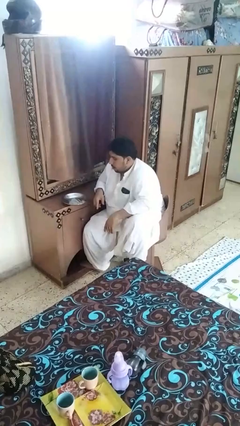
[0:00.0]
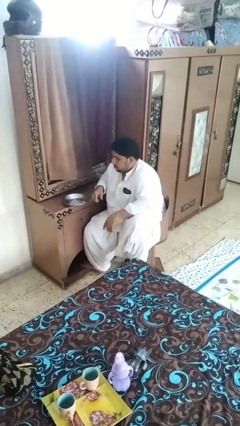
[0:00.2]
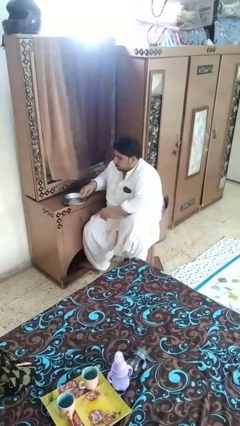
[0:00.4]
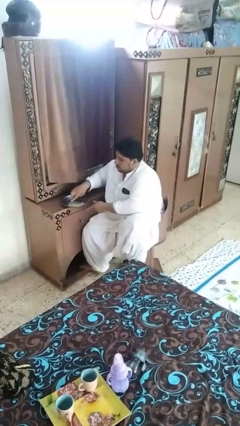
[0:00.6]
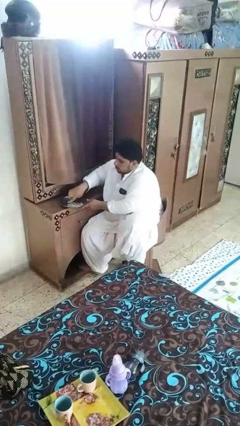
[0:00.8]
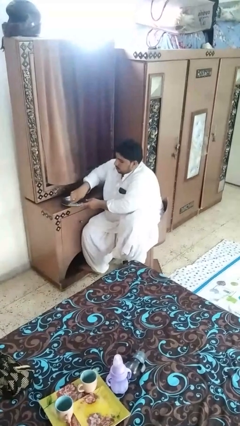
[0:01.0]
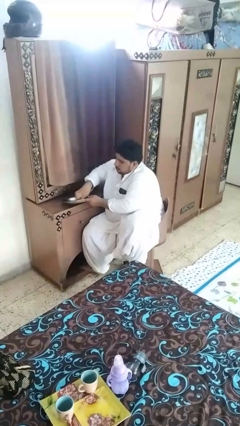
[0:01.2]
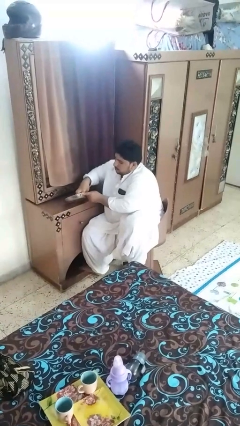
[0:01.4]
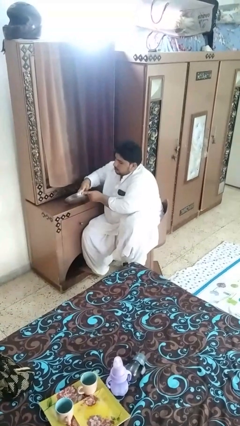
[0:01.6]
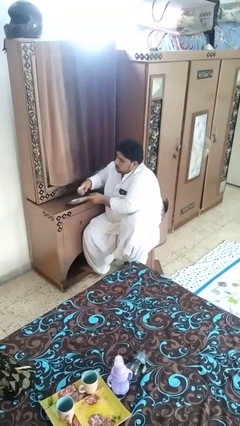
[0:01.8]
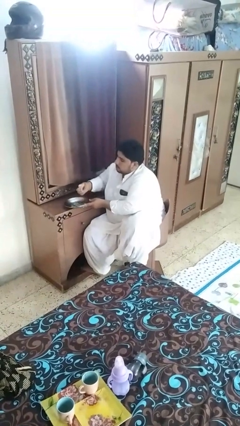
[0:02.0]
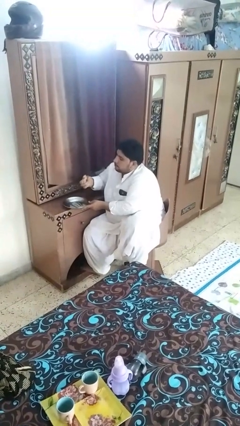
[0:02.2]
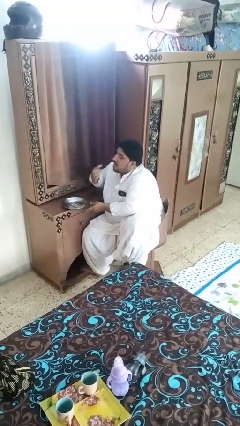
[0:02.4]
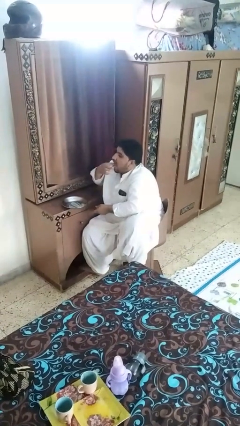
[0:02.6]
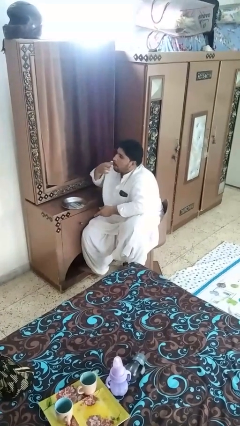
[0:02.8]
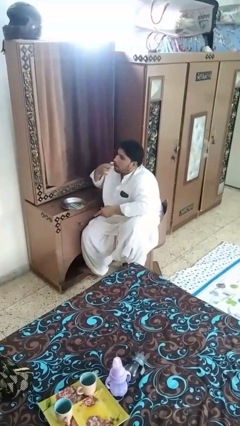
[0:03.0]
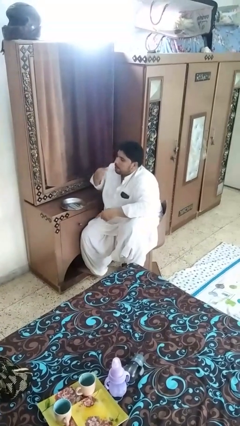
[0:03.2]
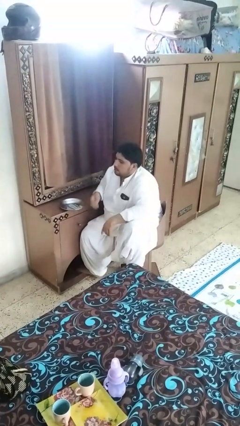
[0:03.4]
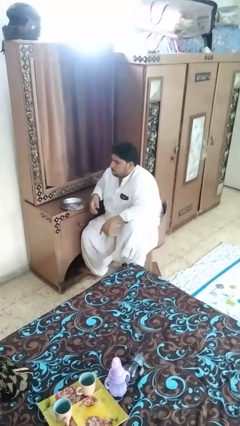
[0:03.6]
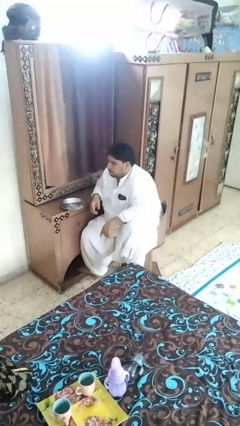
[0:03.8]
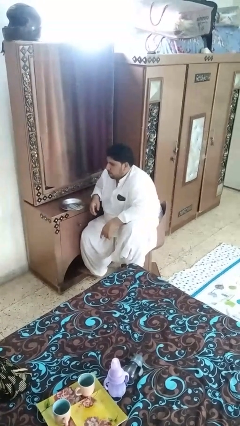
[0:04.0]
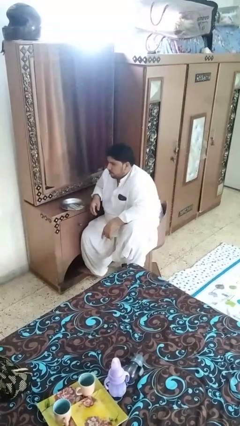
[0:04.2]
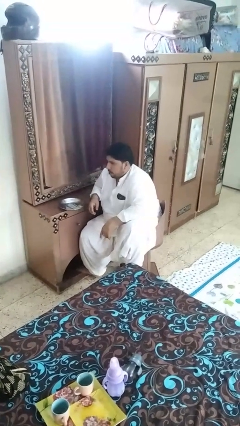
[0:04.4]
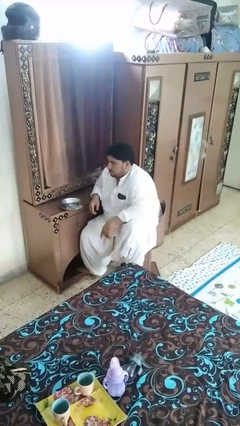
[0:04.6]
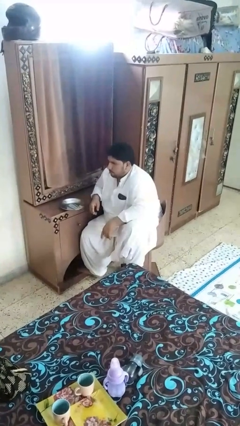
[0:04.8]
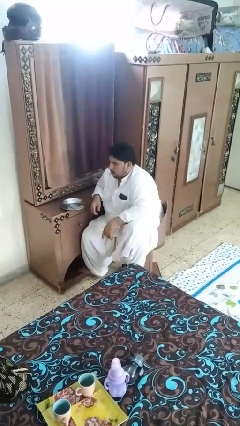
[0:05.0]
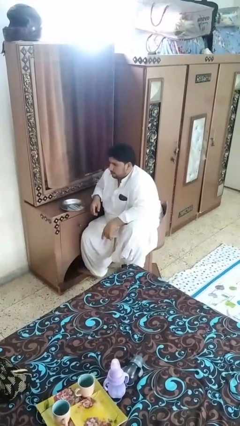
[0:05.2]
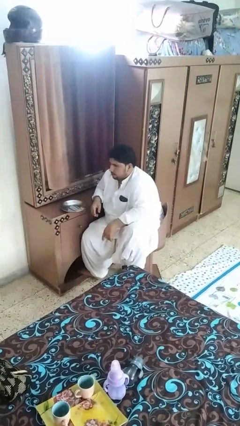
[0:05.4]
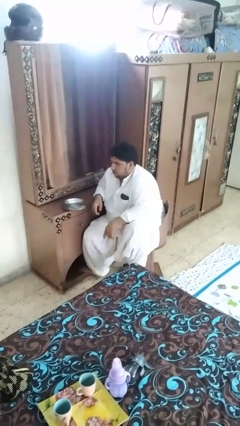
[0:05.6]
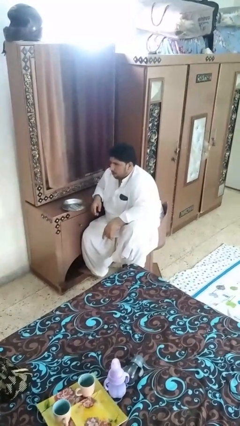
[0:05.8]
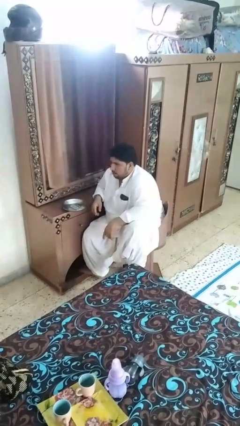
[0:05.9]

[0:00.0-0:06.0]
person eats with hands

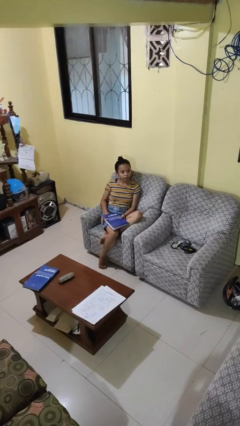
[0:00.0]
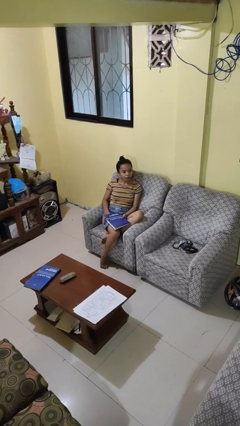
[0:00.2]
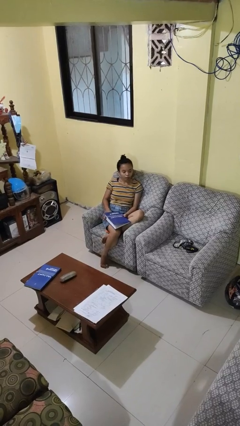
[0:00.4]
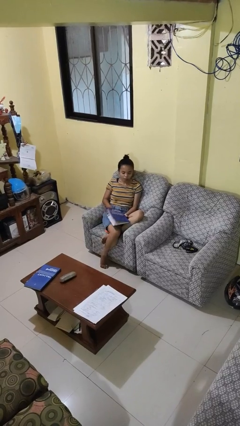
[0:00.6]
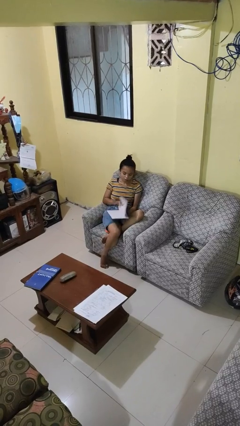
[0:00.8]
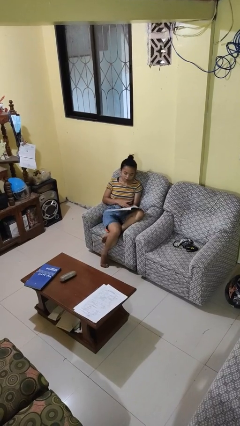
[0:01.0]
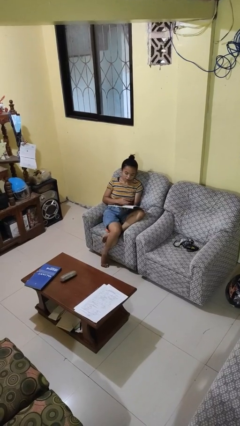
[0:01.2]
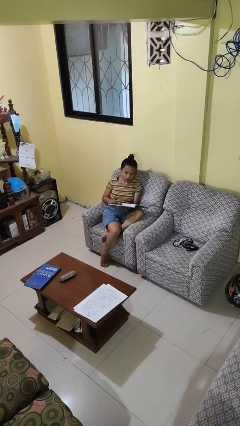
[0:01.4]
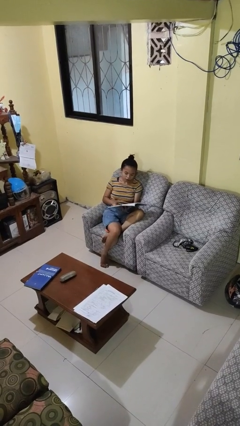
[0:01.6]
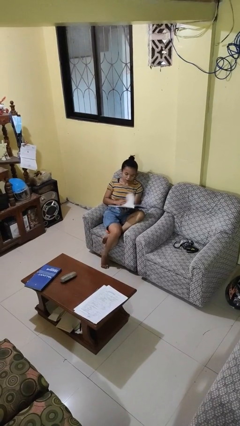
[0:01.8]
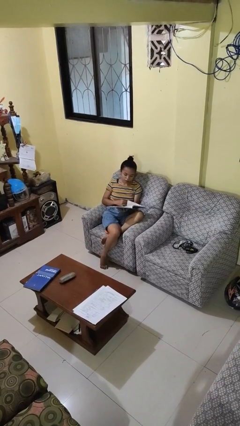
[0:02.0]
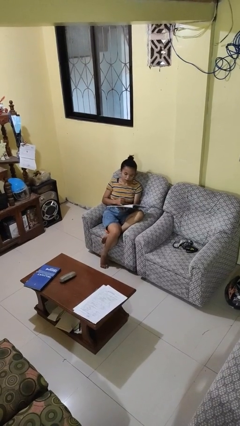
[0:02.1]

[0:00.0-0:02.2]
person reads book

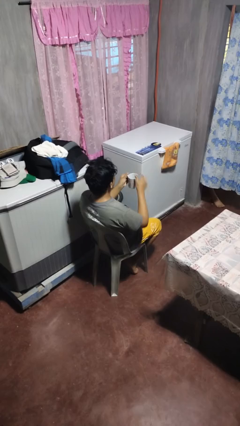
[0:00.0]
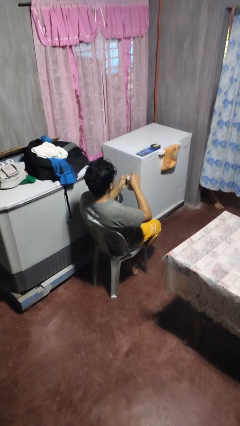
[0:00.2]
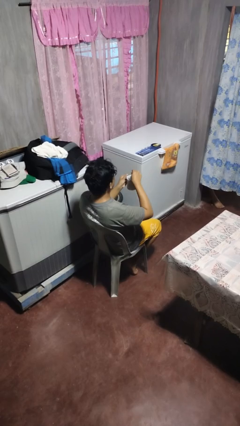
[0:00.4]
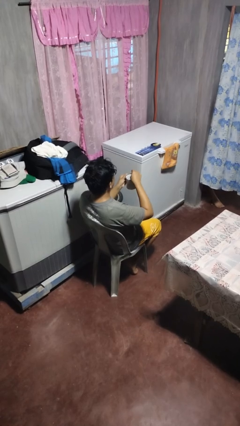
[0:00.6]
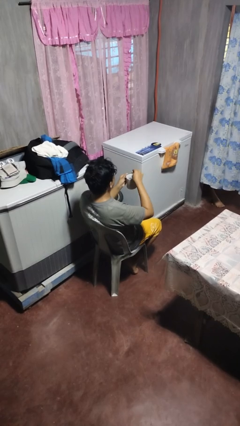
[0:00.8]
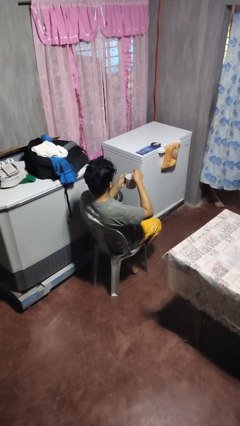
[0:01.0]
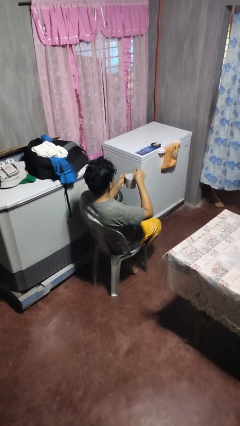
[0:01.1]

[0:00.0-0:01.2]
person stirs mug

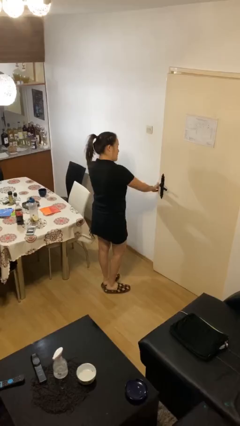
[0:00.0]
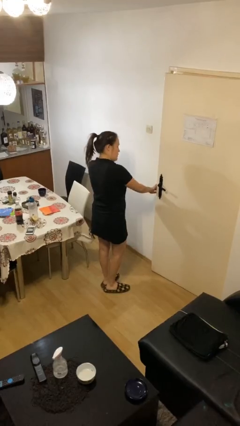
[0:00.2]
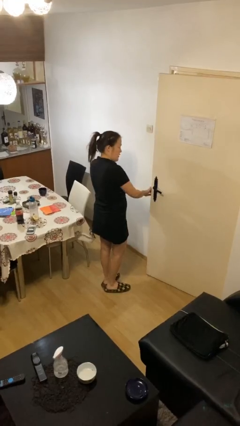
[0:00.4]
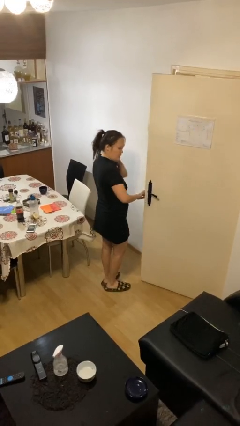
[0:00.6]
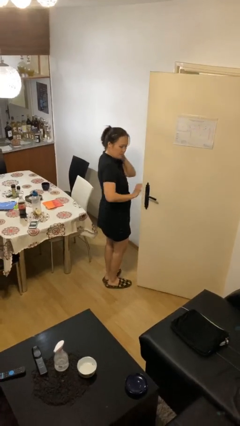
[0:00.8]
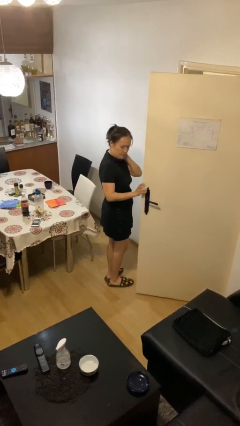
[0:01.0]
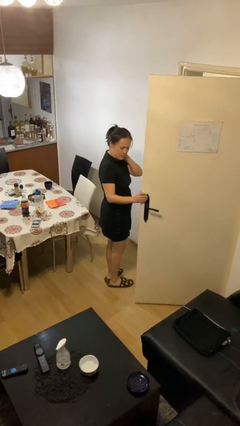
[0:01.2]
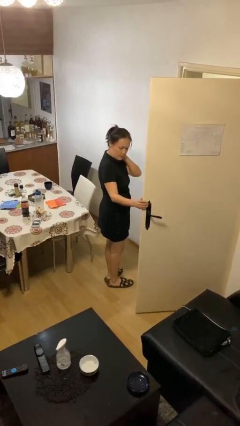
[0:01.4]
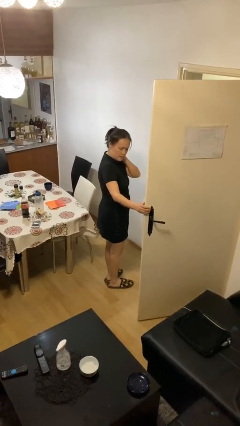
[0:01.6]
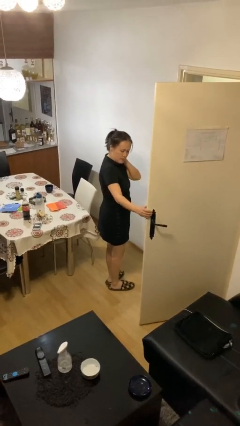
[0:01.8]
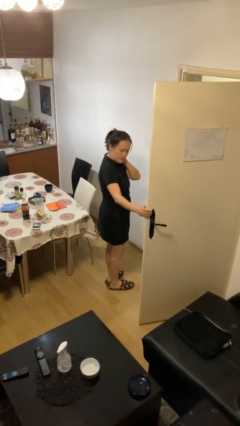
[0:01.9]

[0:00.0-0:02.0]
person opens facility door

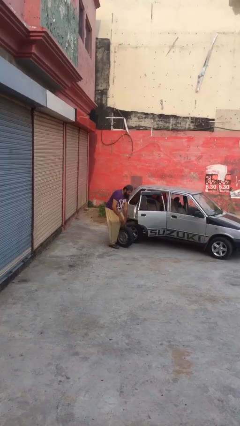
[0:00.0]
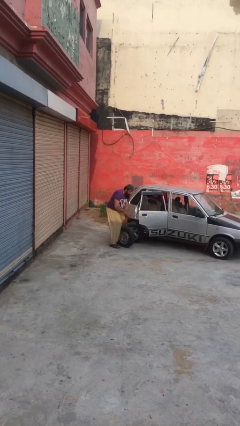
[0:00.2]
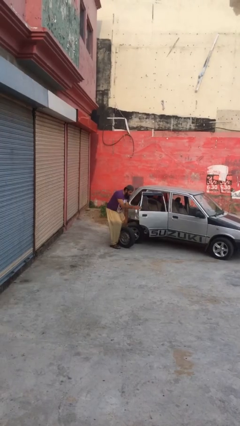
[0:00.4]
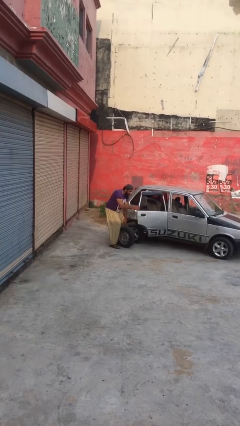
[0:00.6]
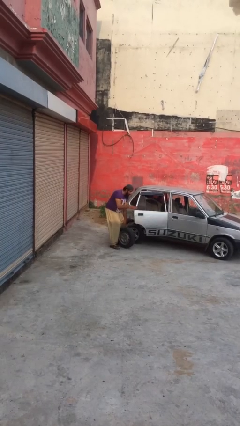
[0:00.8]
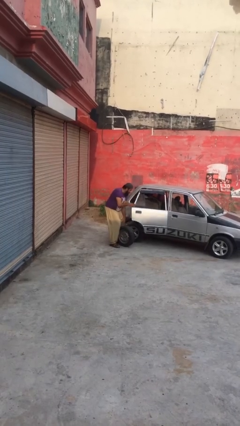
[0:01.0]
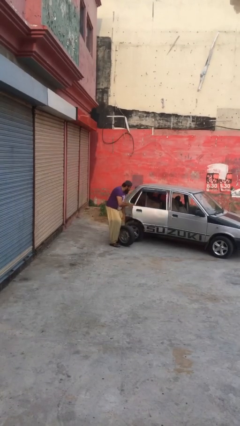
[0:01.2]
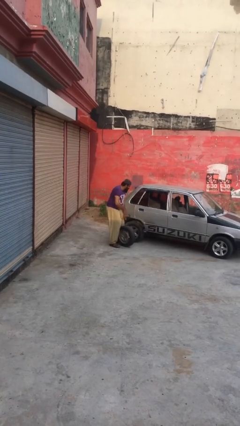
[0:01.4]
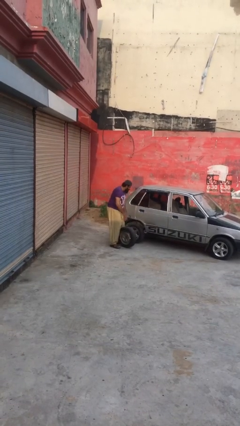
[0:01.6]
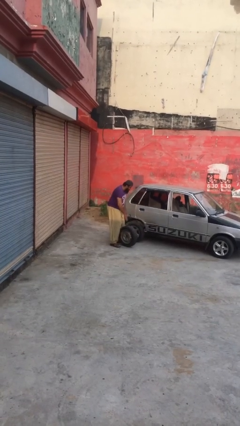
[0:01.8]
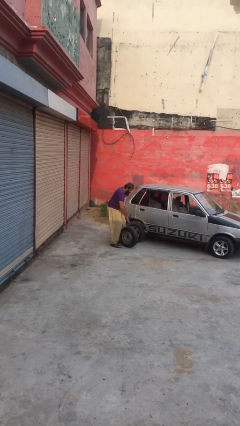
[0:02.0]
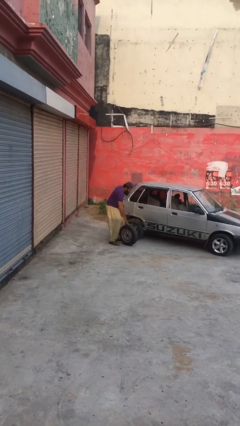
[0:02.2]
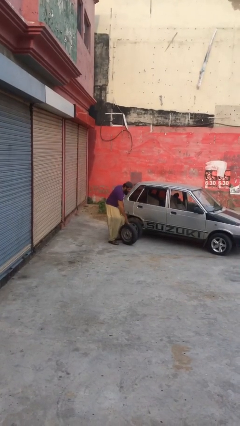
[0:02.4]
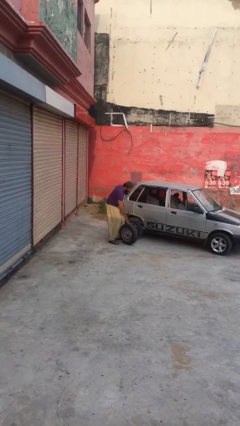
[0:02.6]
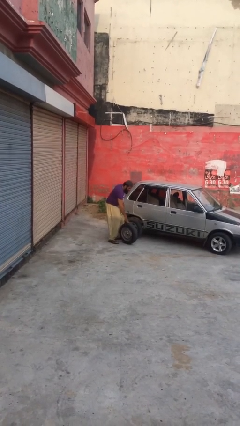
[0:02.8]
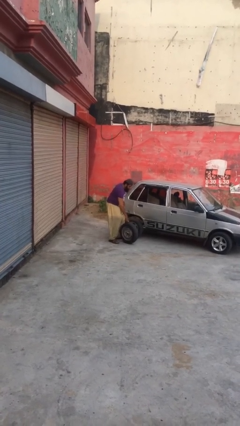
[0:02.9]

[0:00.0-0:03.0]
person closes car door

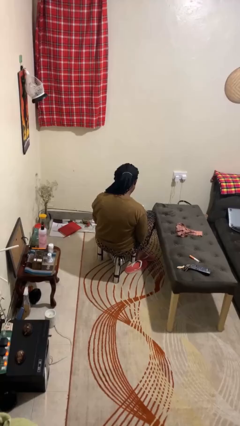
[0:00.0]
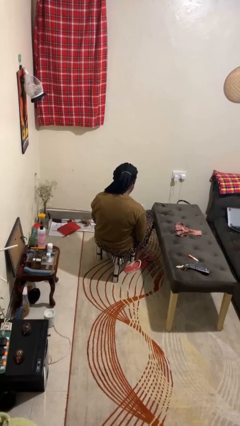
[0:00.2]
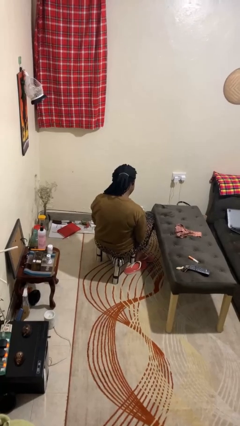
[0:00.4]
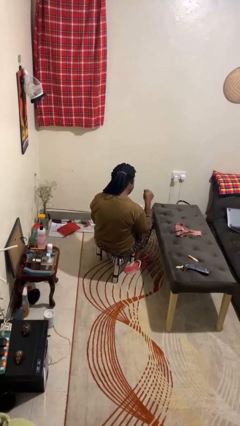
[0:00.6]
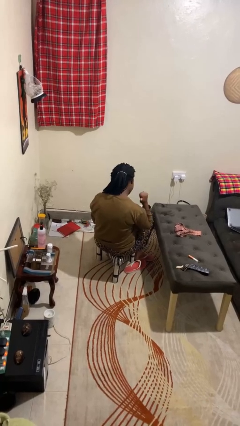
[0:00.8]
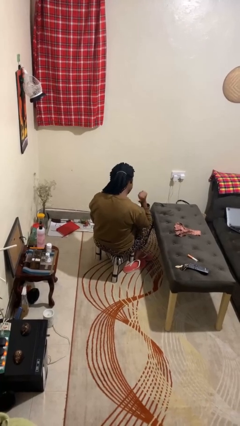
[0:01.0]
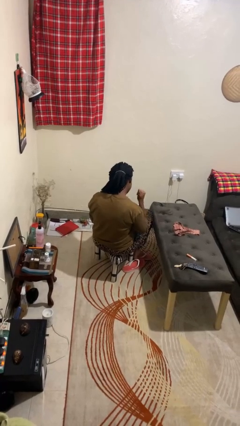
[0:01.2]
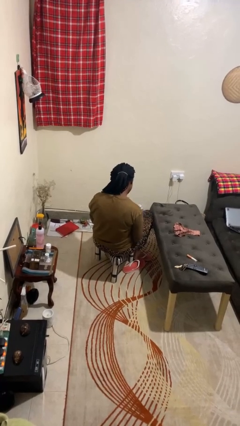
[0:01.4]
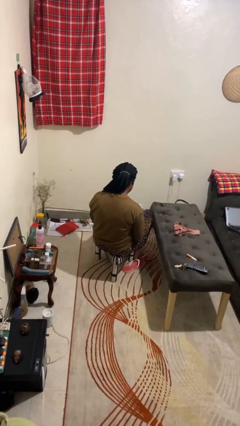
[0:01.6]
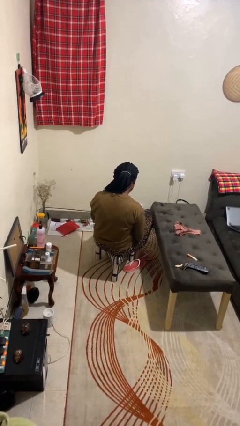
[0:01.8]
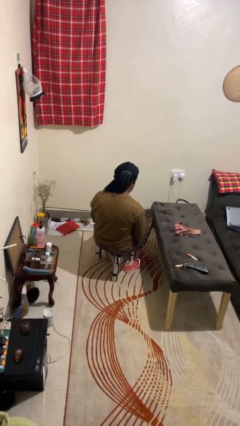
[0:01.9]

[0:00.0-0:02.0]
person gestures behind me

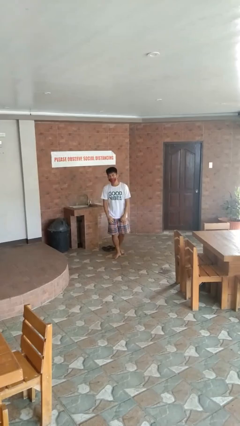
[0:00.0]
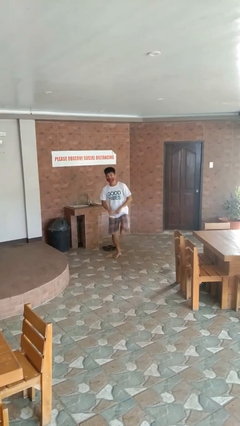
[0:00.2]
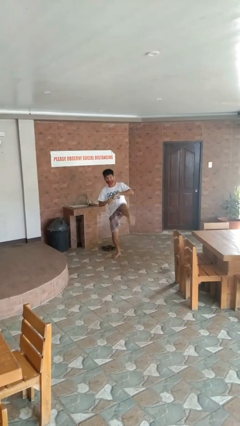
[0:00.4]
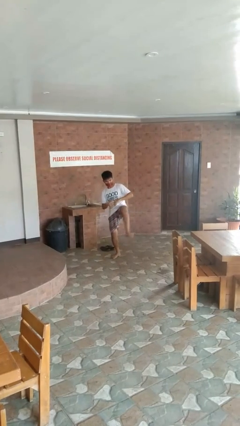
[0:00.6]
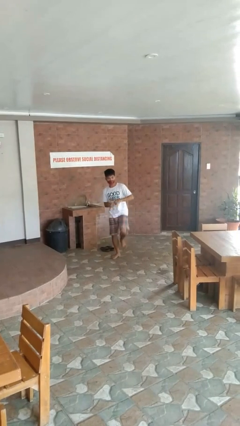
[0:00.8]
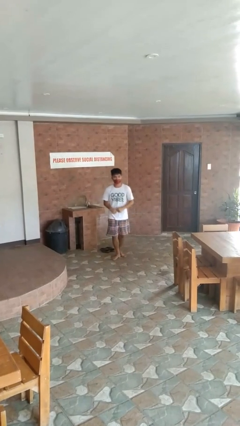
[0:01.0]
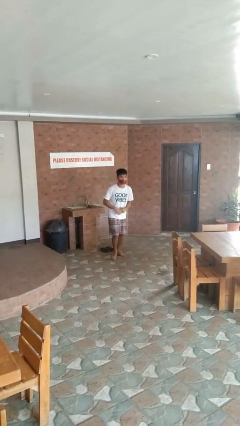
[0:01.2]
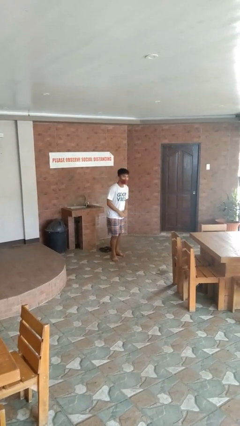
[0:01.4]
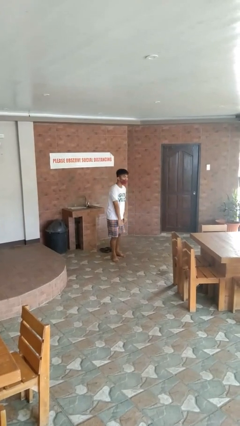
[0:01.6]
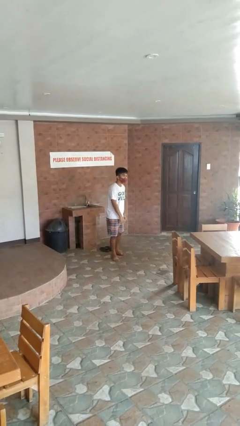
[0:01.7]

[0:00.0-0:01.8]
person karate kicks
